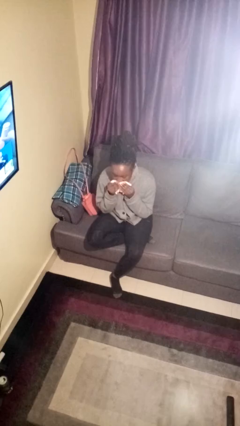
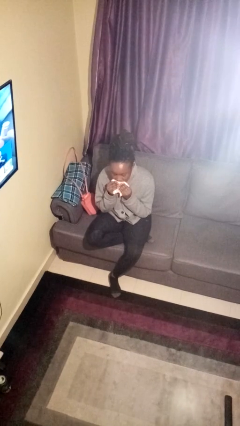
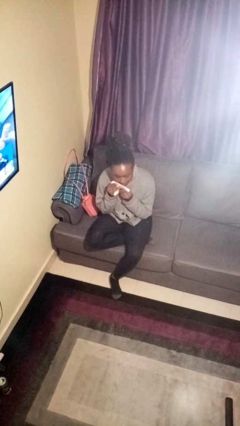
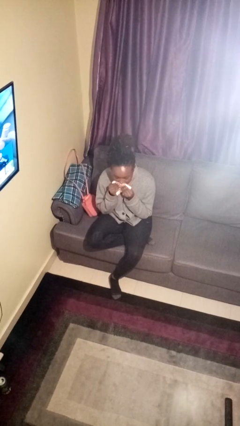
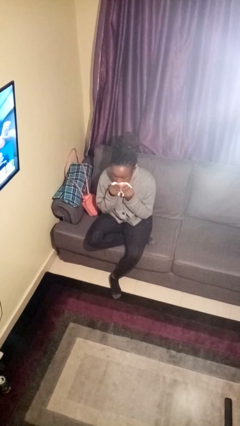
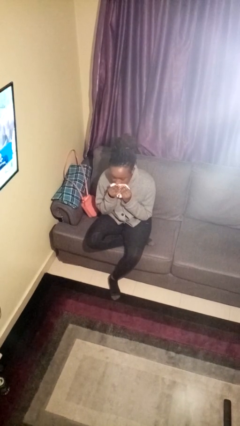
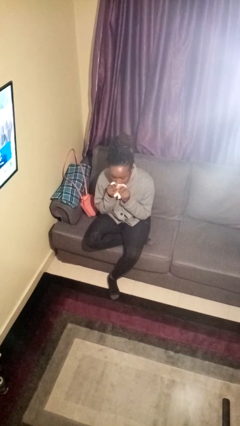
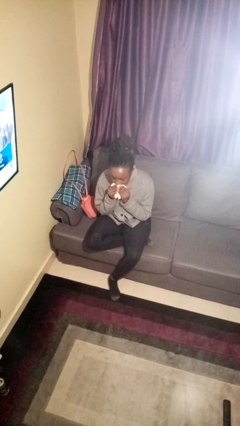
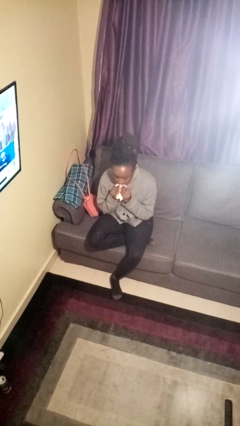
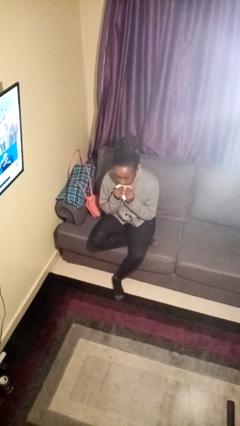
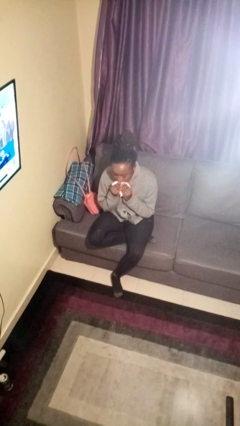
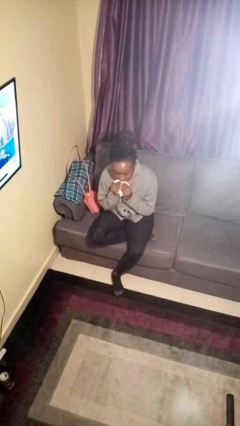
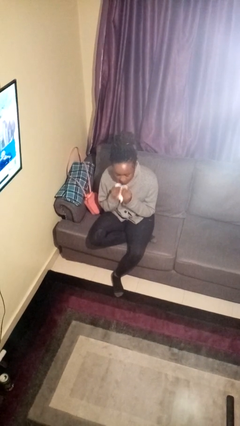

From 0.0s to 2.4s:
person wipes mouth with napkin

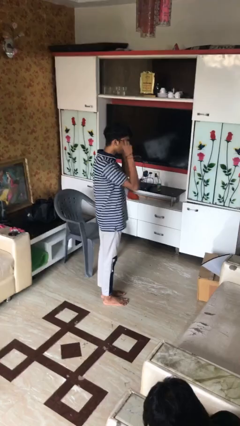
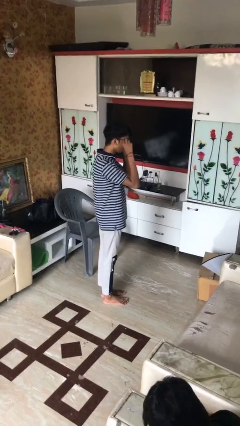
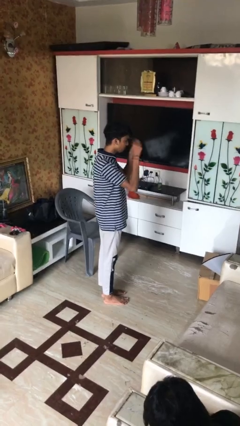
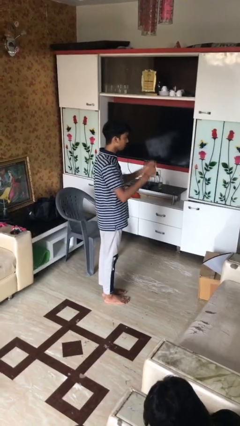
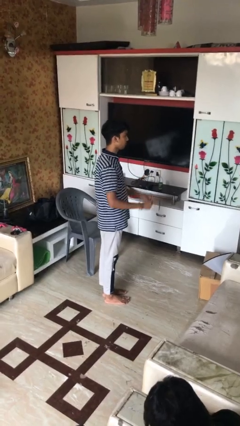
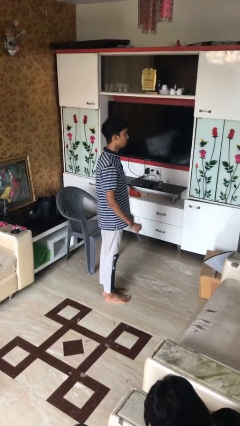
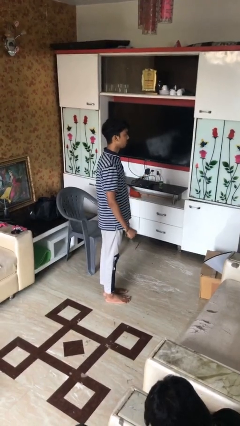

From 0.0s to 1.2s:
person takes off glasses

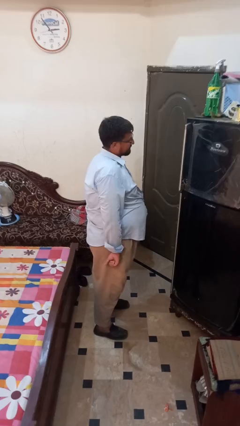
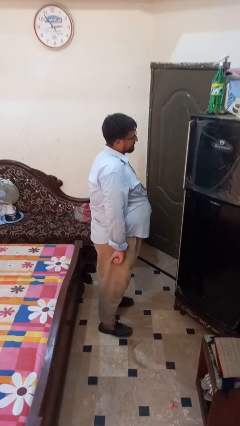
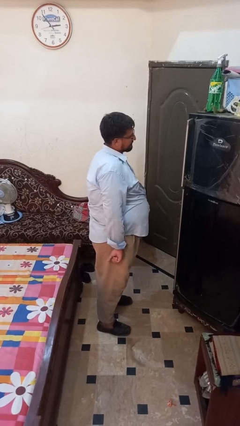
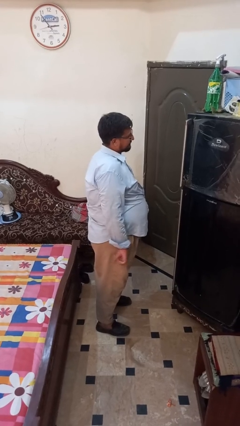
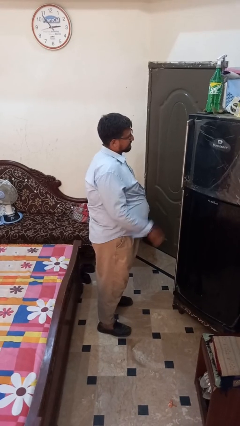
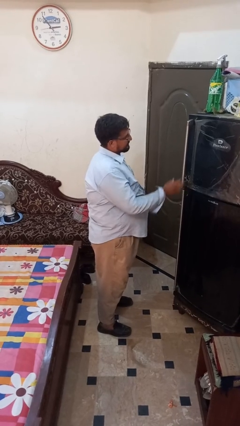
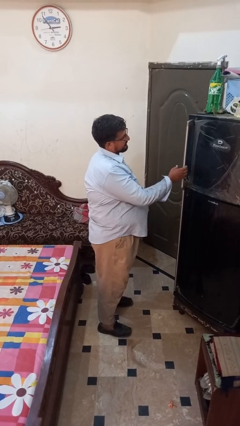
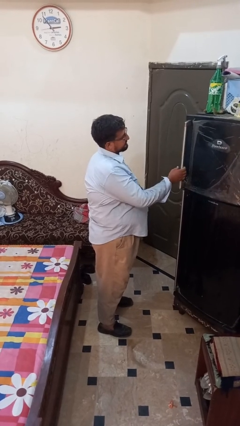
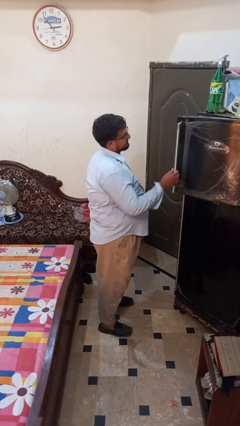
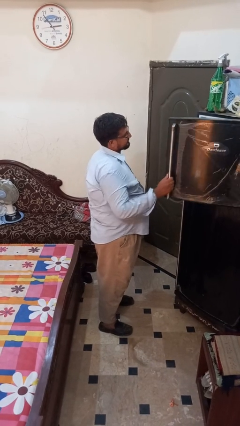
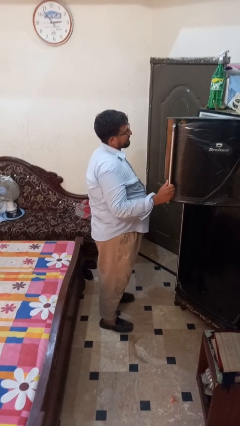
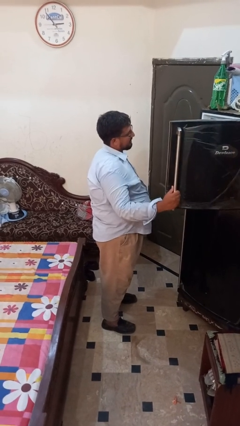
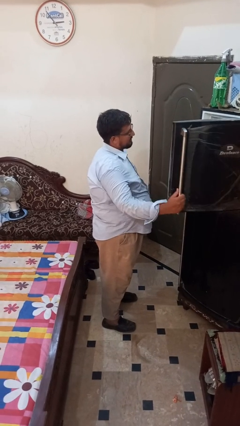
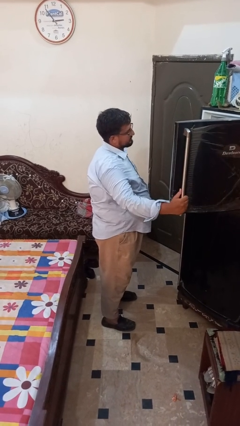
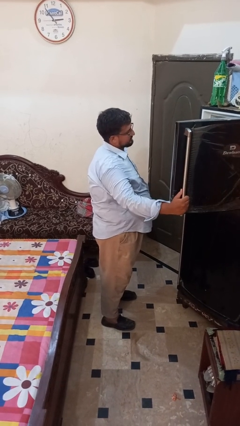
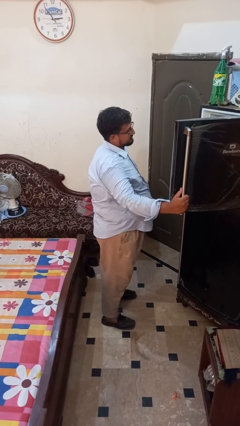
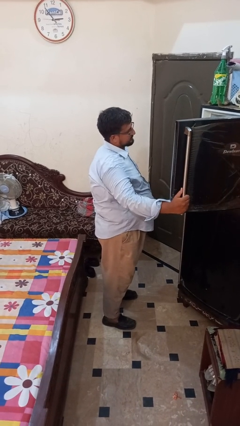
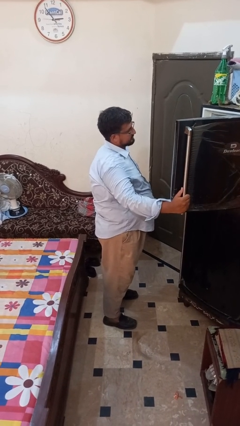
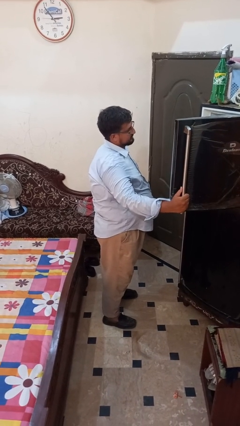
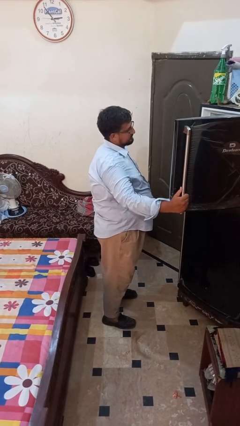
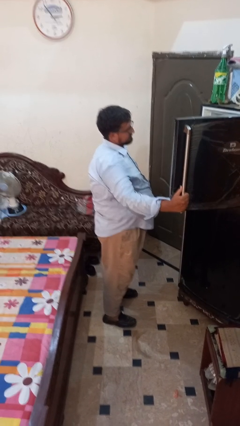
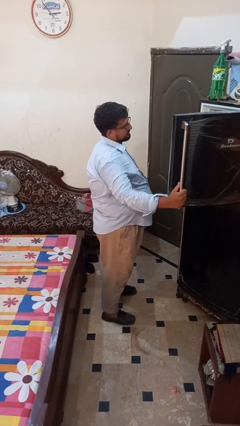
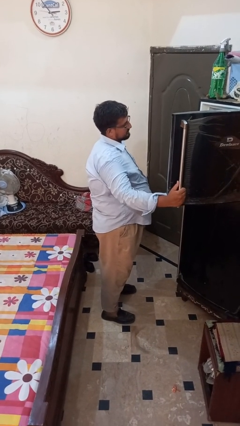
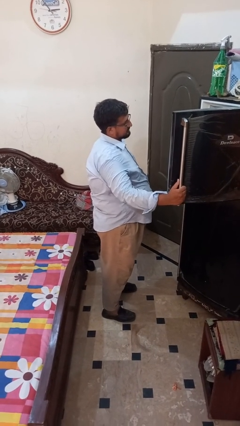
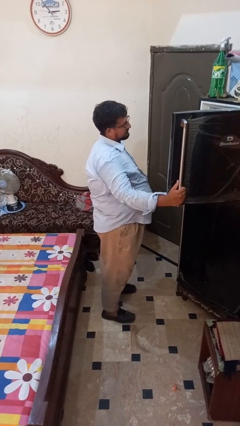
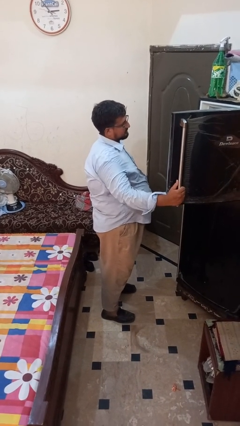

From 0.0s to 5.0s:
person opens refrigerator

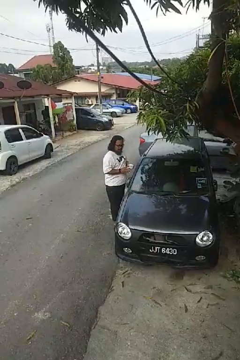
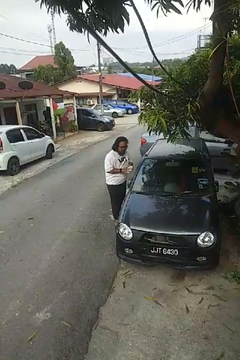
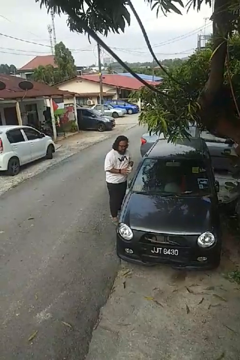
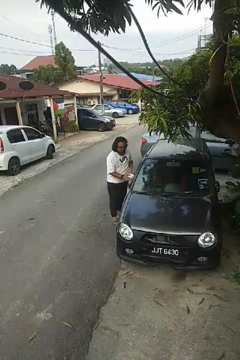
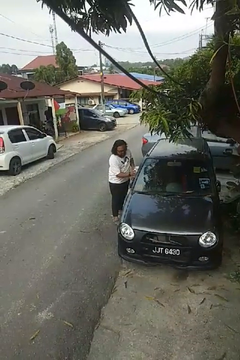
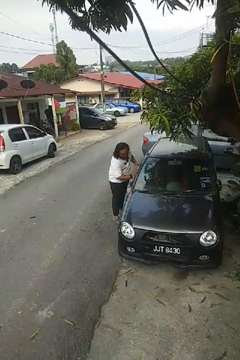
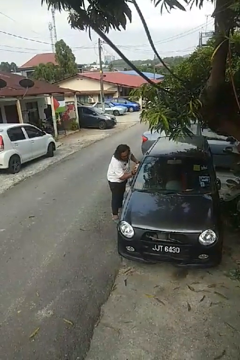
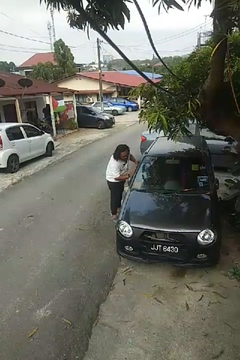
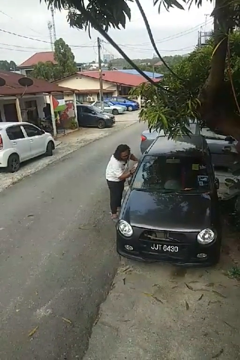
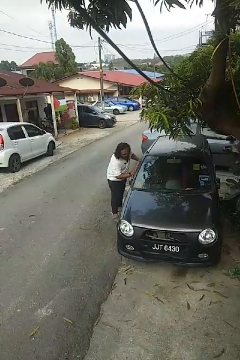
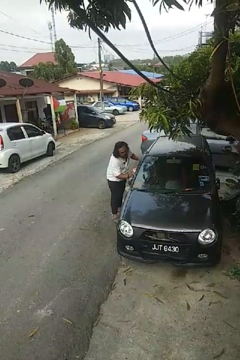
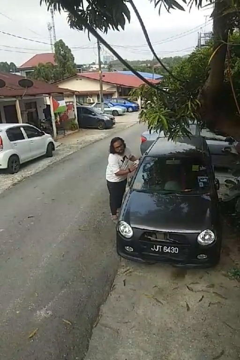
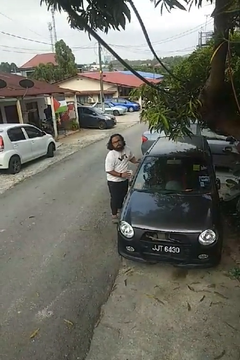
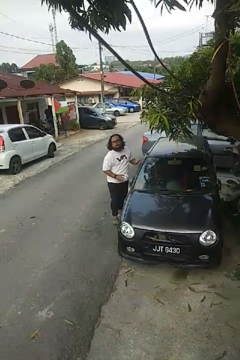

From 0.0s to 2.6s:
person polishes car with rag

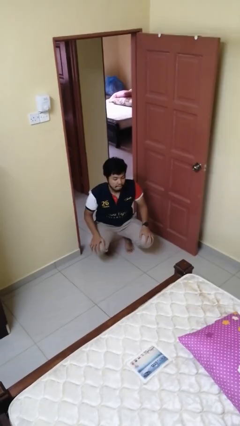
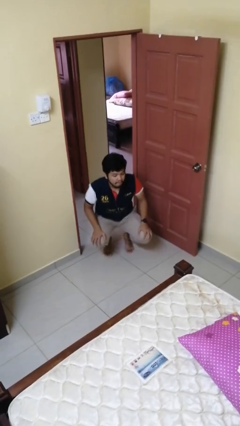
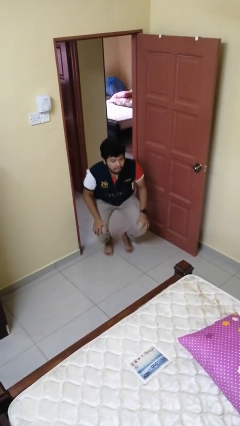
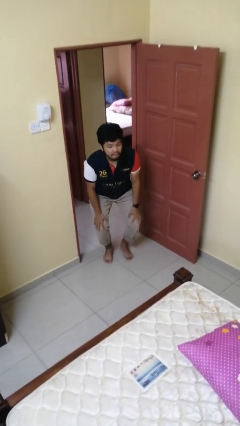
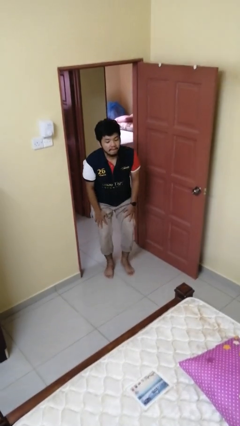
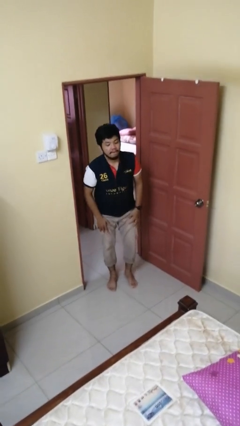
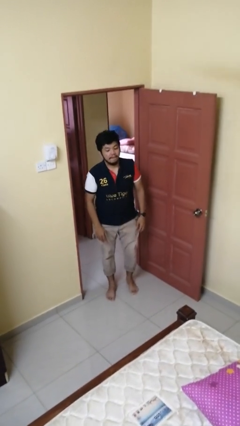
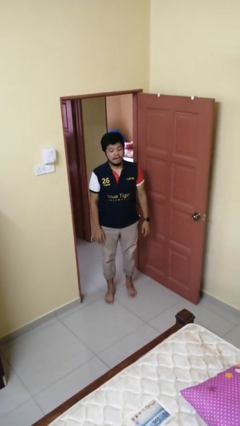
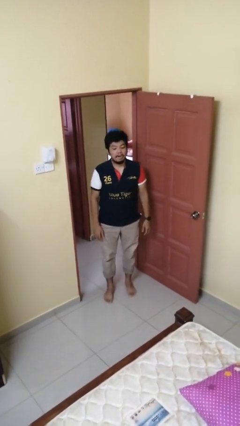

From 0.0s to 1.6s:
person stands up

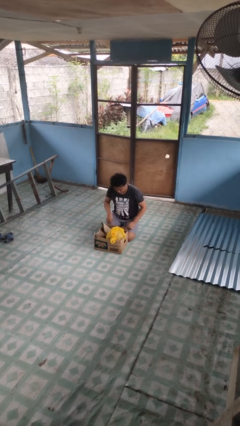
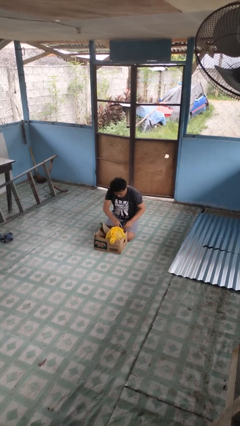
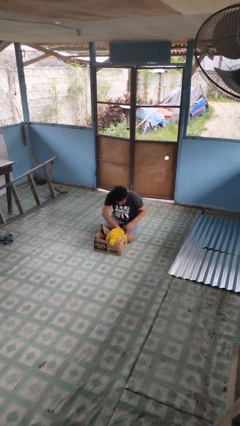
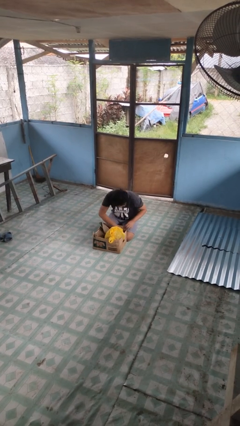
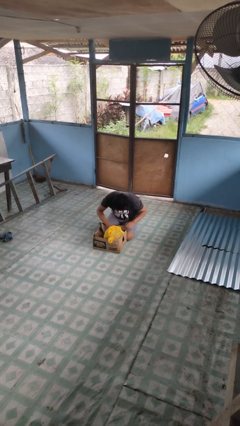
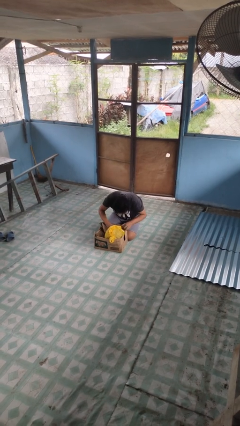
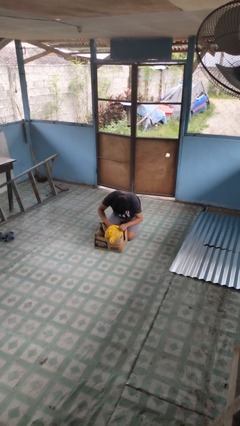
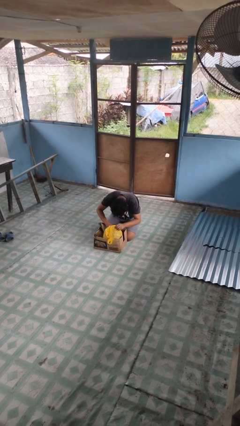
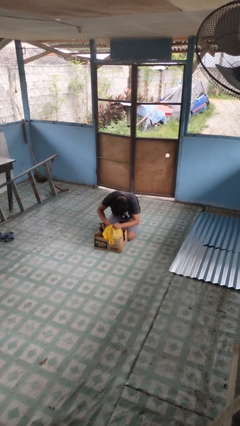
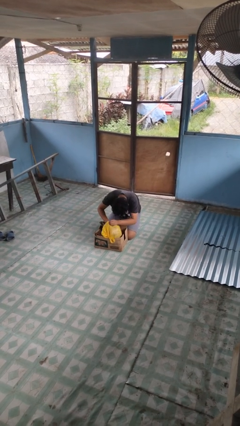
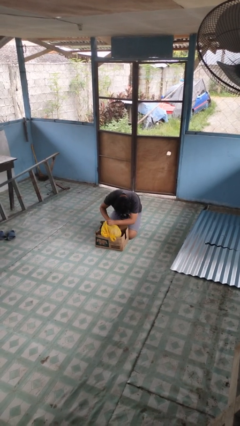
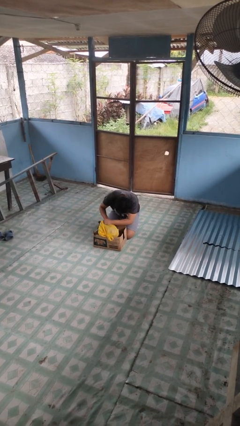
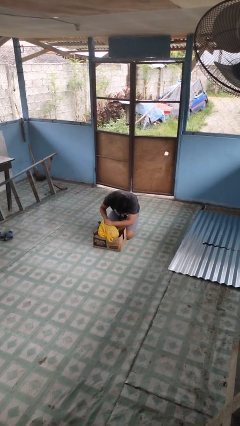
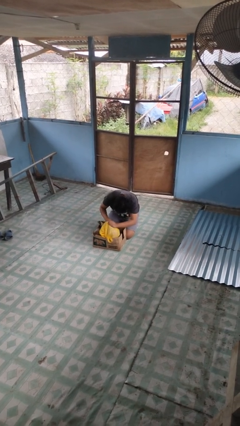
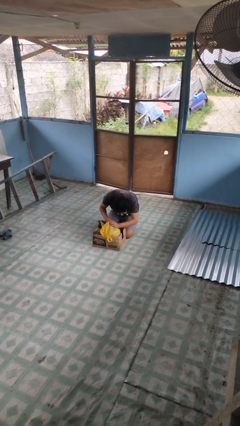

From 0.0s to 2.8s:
person searches in box

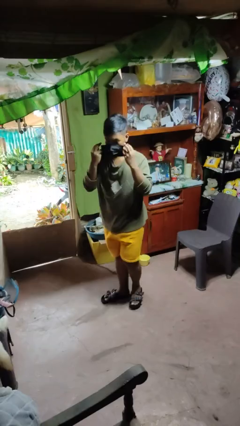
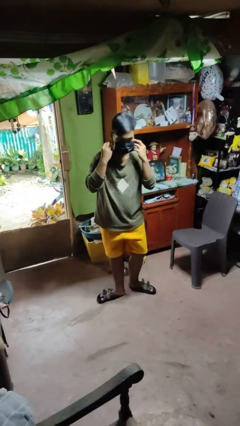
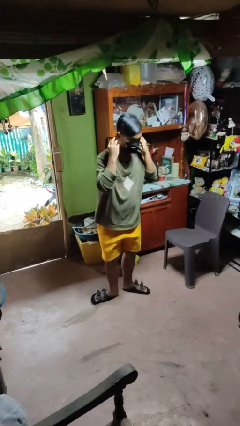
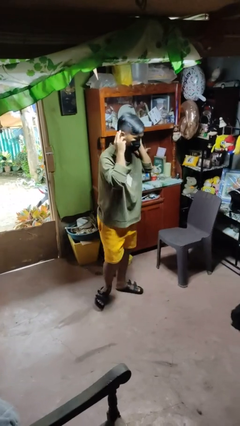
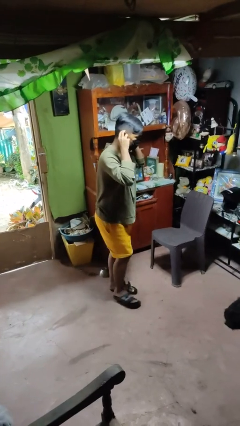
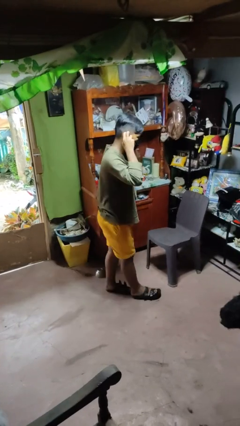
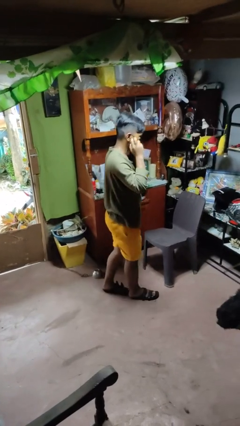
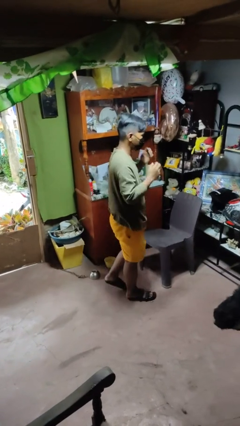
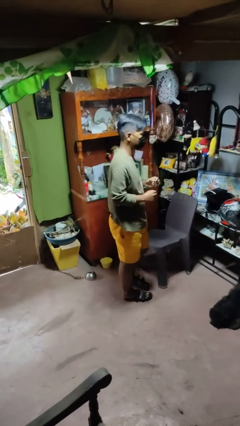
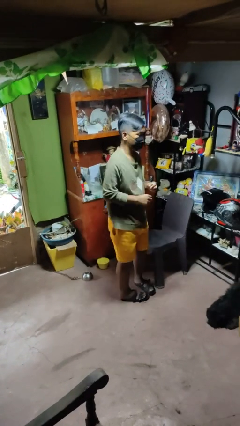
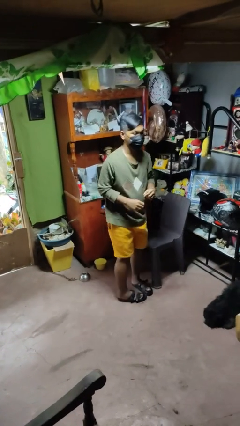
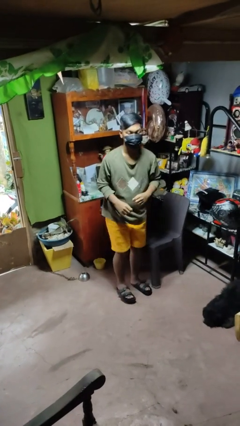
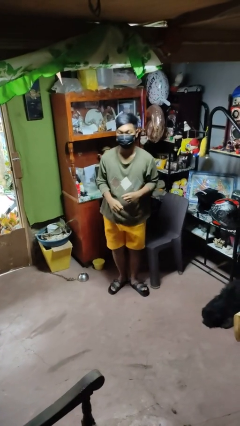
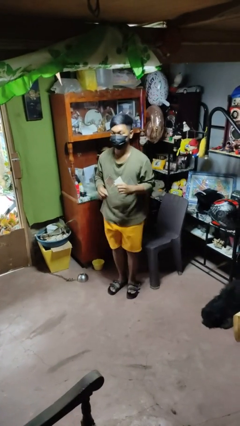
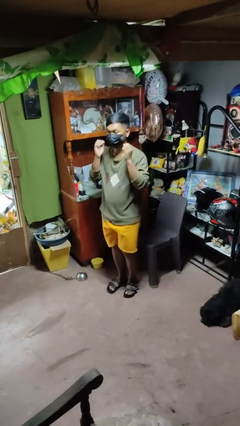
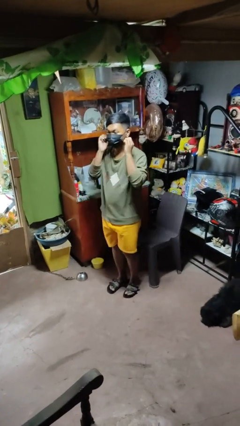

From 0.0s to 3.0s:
person puts on facemask
